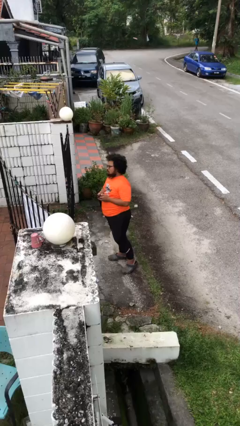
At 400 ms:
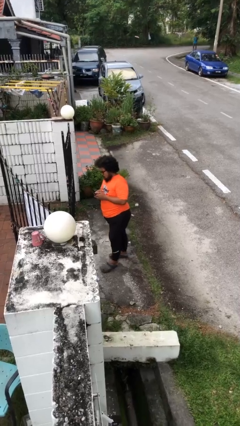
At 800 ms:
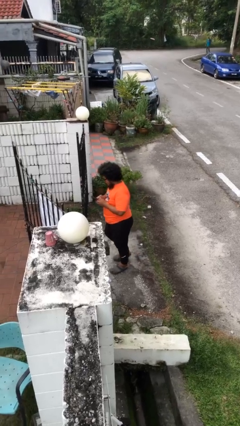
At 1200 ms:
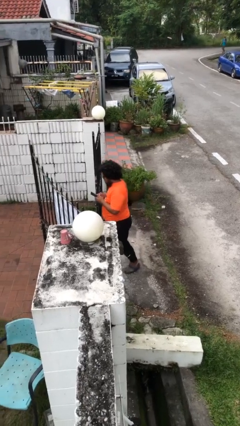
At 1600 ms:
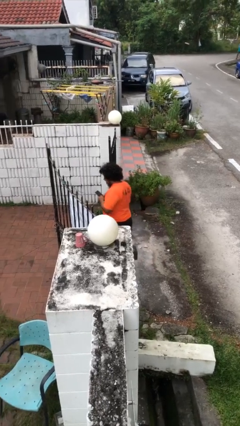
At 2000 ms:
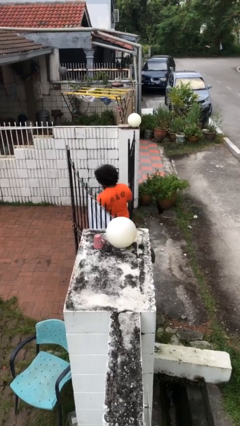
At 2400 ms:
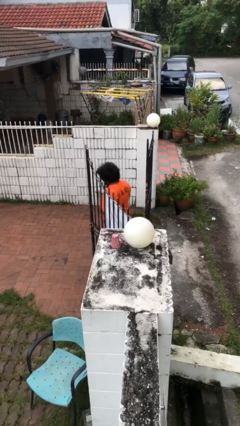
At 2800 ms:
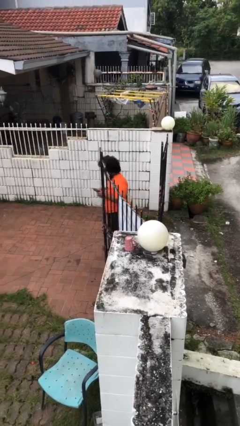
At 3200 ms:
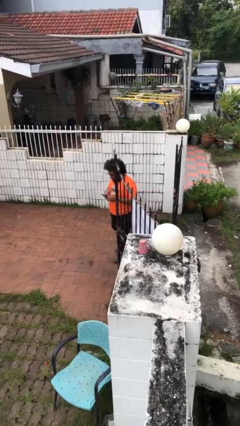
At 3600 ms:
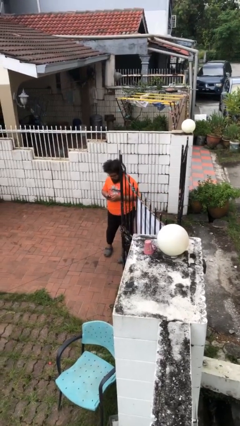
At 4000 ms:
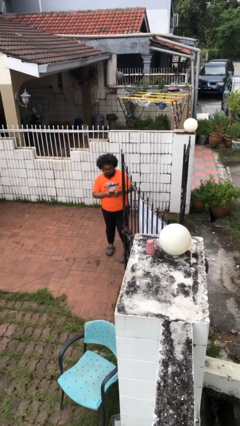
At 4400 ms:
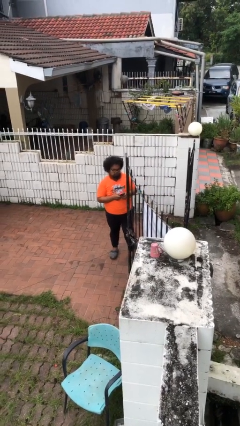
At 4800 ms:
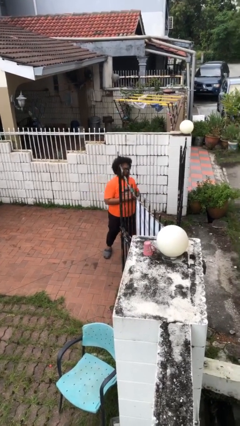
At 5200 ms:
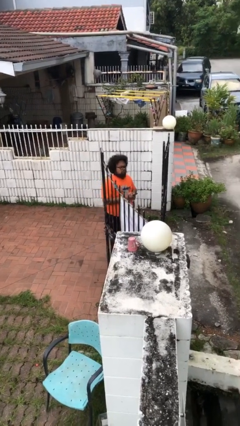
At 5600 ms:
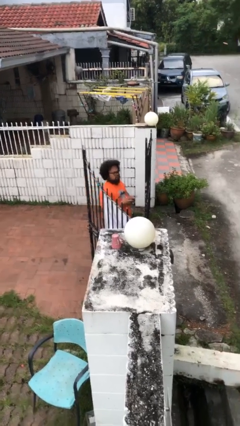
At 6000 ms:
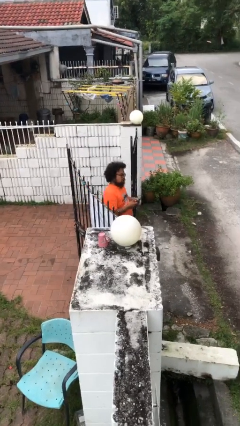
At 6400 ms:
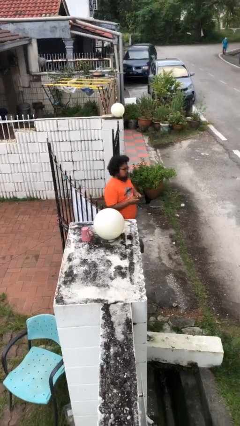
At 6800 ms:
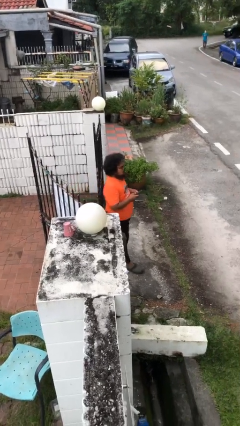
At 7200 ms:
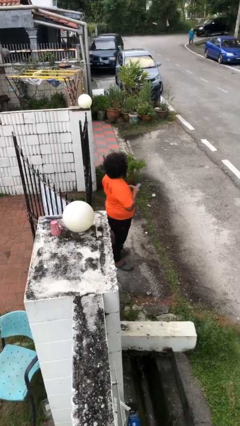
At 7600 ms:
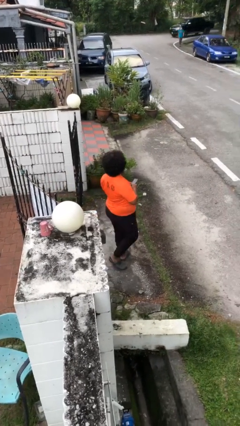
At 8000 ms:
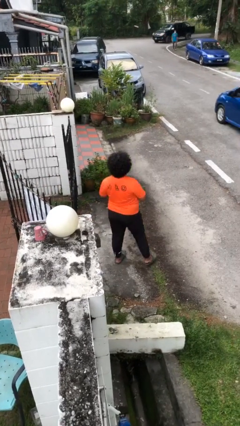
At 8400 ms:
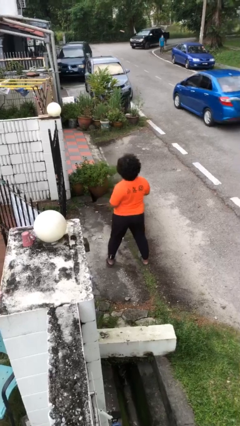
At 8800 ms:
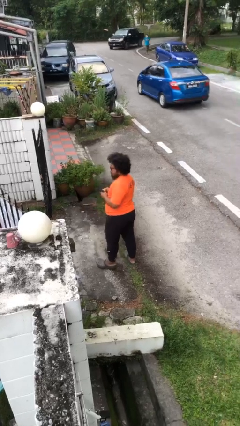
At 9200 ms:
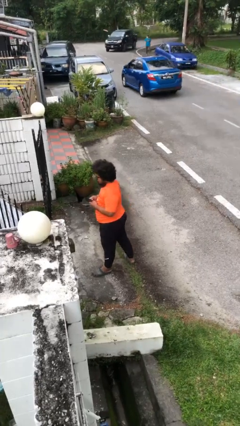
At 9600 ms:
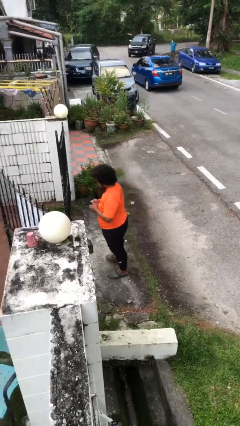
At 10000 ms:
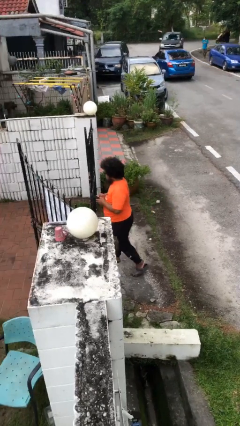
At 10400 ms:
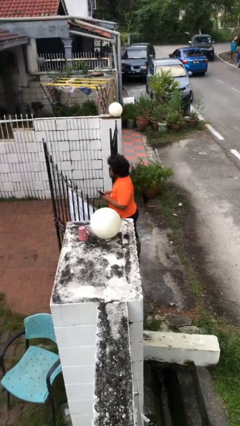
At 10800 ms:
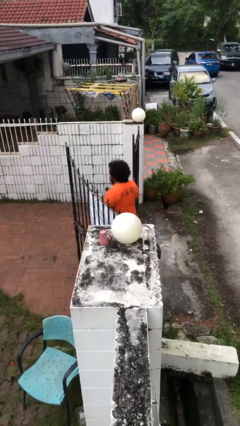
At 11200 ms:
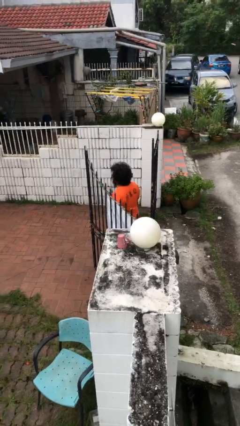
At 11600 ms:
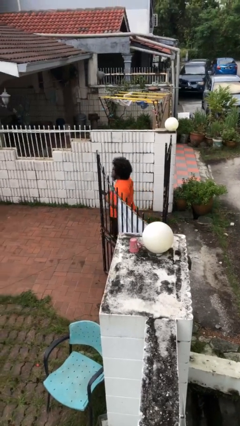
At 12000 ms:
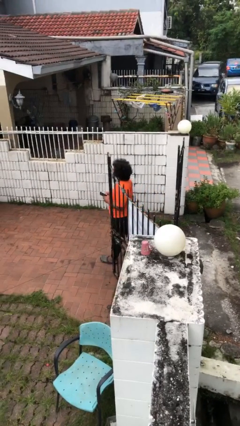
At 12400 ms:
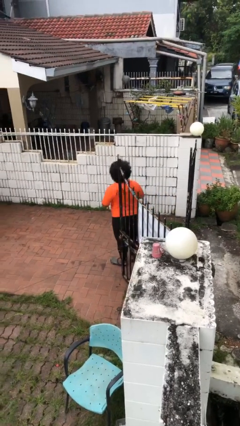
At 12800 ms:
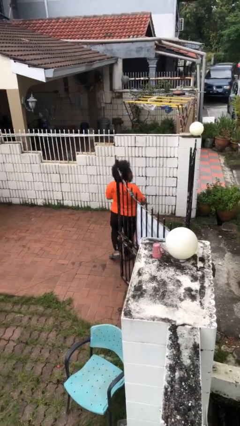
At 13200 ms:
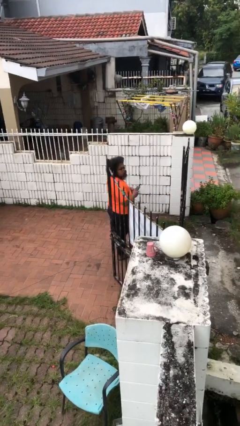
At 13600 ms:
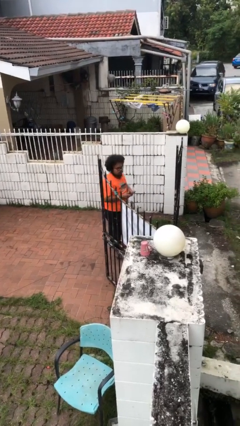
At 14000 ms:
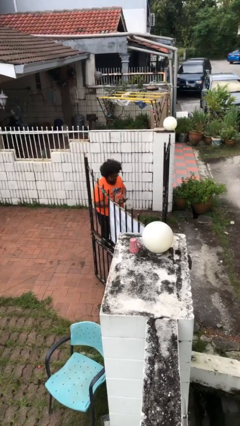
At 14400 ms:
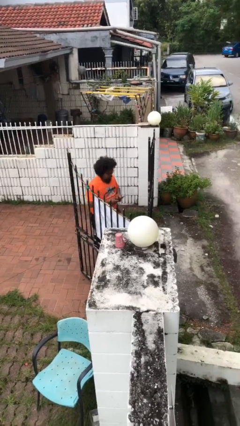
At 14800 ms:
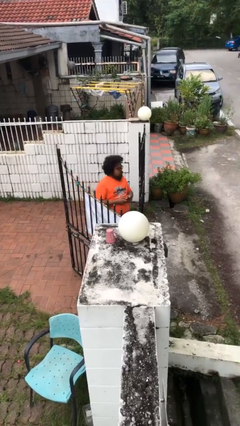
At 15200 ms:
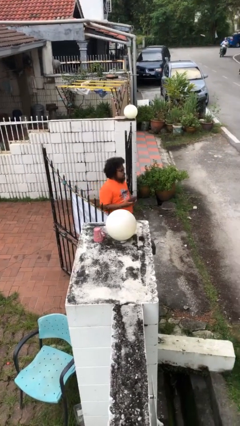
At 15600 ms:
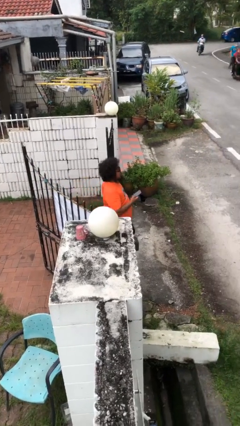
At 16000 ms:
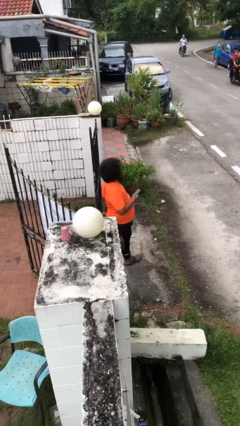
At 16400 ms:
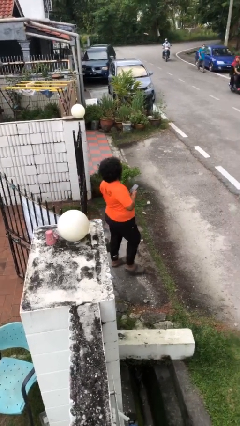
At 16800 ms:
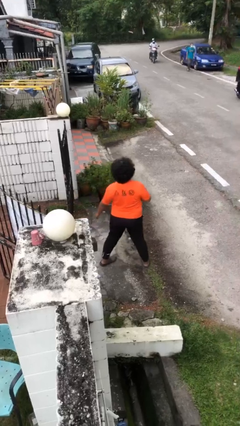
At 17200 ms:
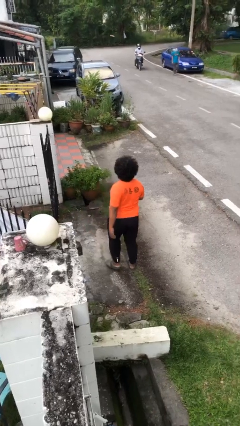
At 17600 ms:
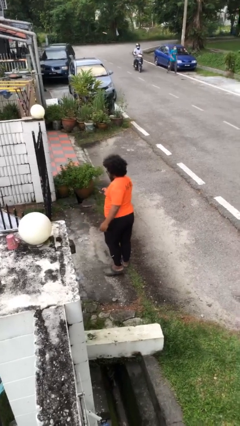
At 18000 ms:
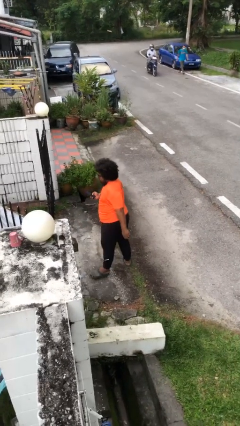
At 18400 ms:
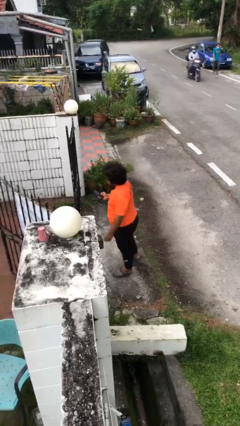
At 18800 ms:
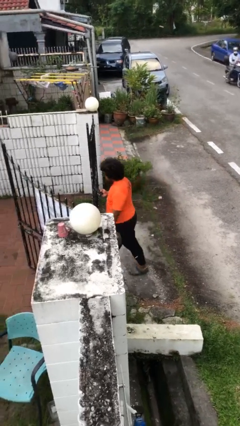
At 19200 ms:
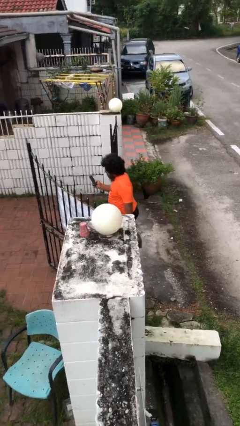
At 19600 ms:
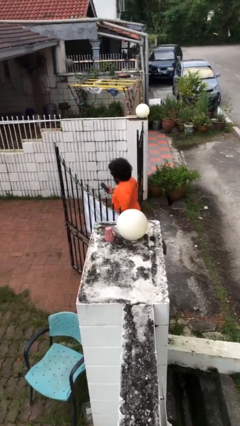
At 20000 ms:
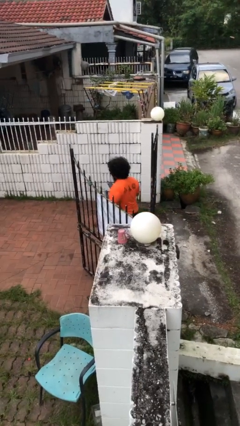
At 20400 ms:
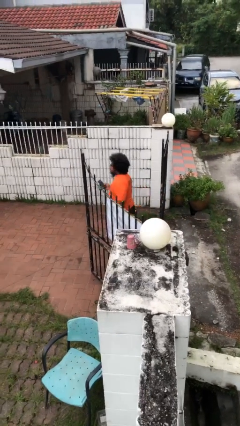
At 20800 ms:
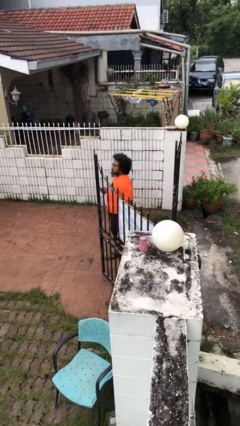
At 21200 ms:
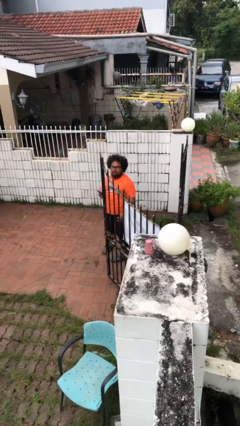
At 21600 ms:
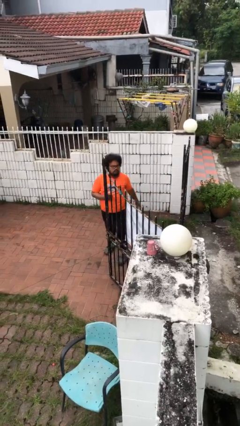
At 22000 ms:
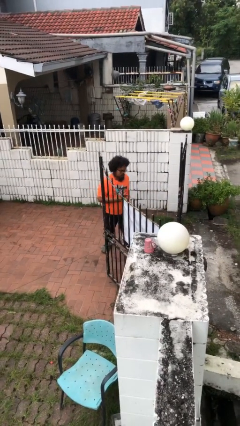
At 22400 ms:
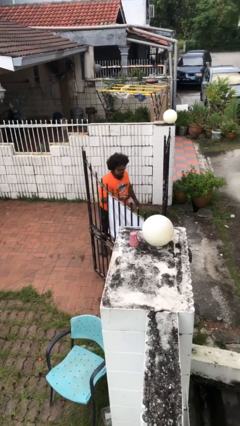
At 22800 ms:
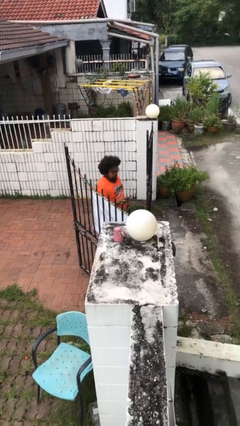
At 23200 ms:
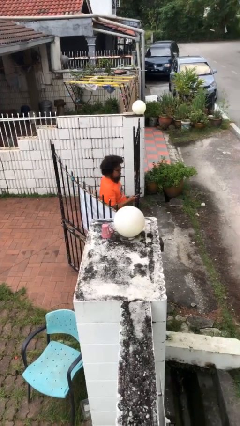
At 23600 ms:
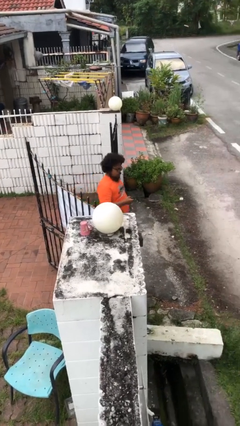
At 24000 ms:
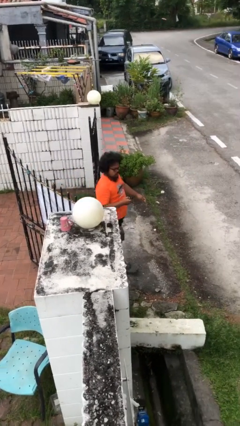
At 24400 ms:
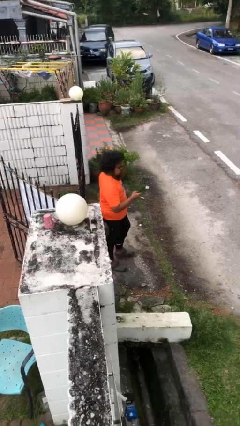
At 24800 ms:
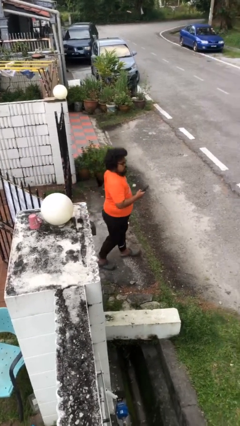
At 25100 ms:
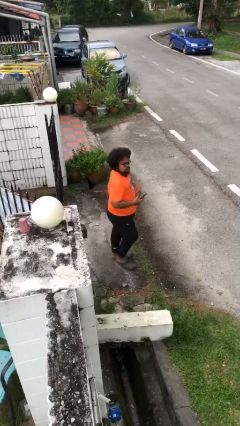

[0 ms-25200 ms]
person texts on phone

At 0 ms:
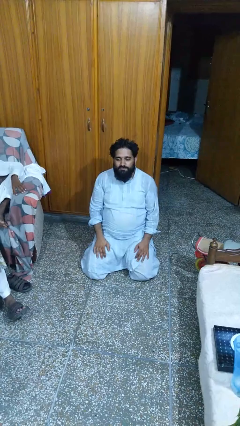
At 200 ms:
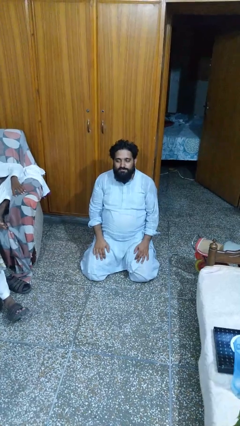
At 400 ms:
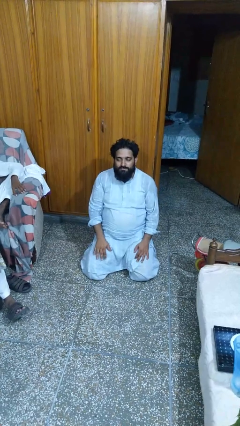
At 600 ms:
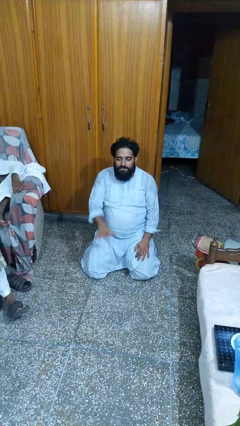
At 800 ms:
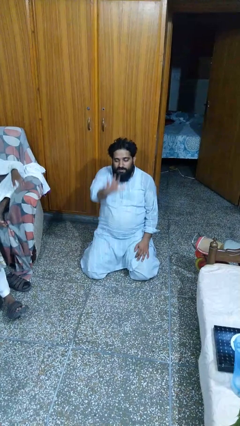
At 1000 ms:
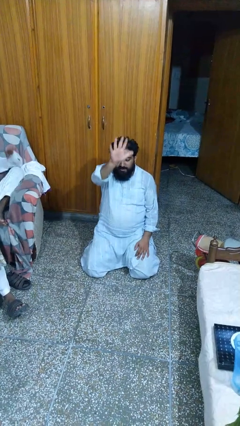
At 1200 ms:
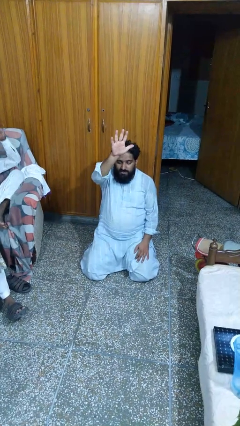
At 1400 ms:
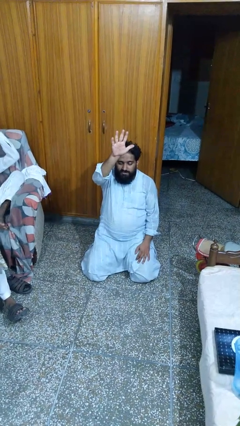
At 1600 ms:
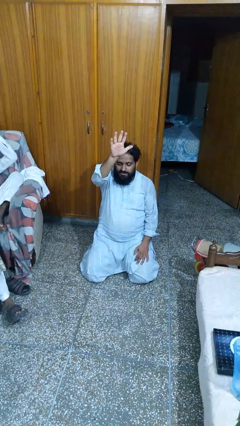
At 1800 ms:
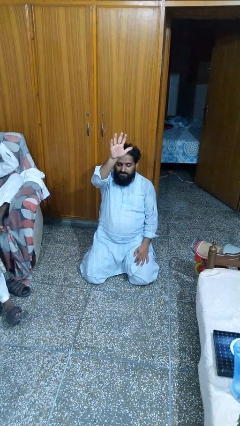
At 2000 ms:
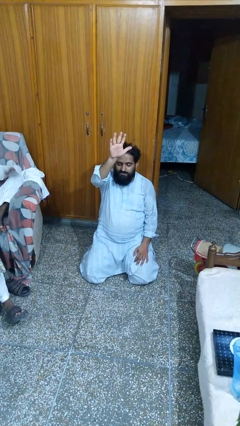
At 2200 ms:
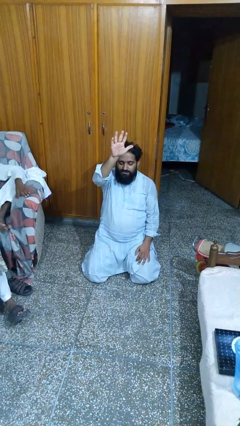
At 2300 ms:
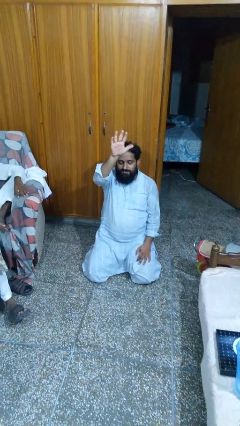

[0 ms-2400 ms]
person gestures raise hand

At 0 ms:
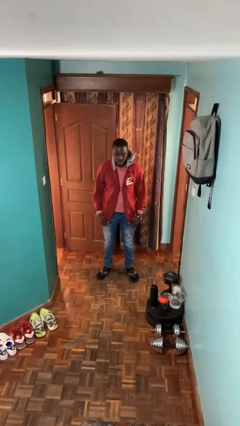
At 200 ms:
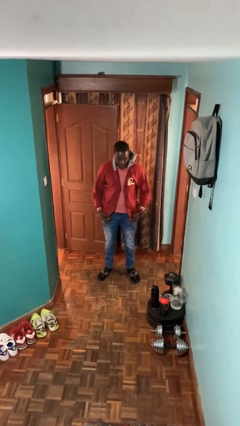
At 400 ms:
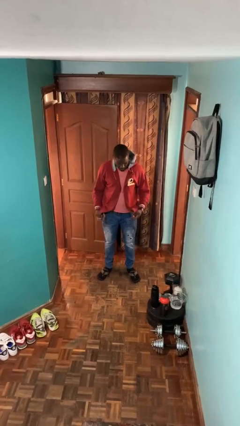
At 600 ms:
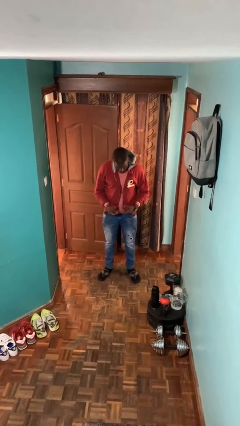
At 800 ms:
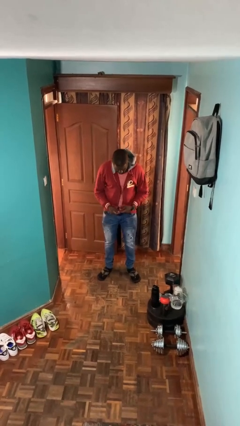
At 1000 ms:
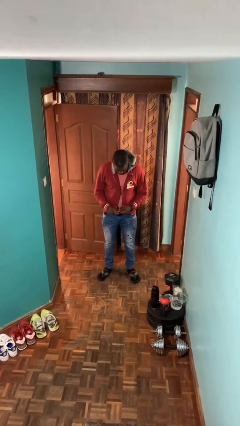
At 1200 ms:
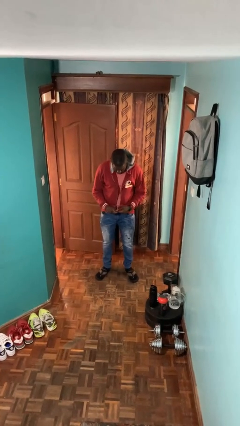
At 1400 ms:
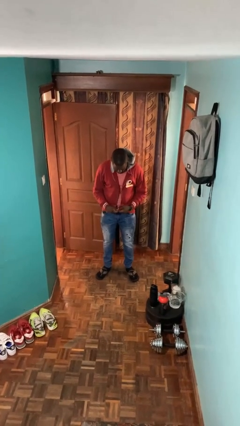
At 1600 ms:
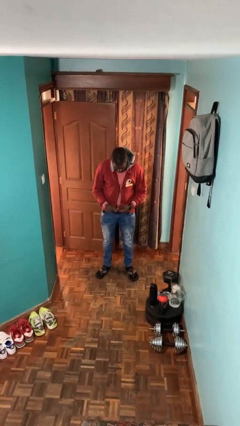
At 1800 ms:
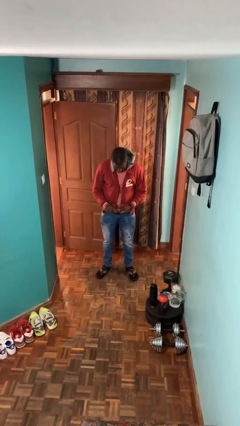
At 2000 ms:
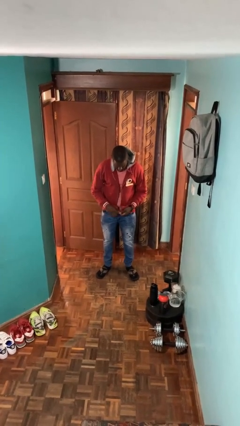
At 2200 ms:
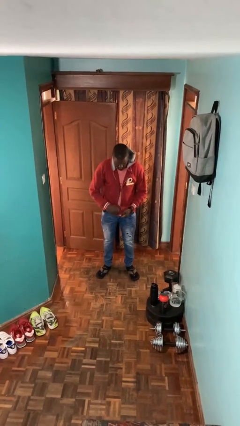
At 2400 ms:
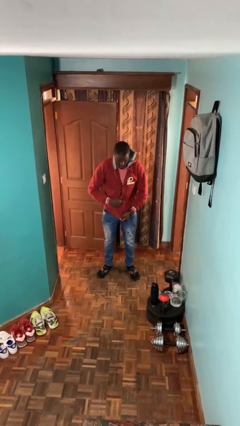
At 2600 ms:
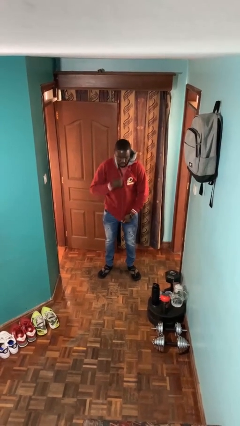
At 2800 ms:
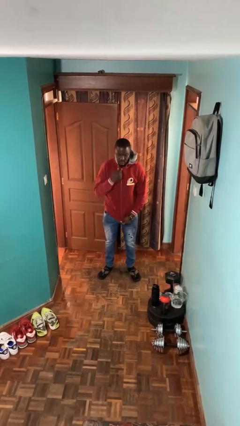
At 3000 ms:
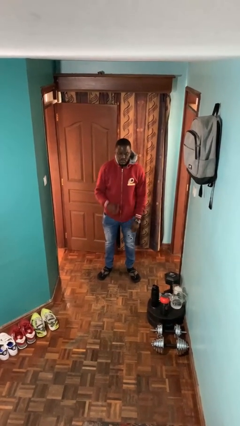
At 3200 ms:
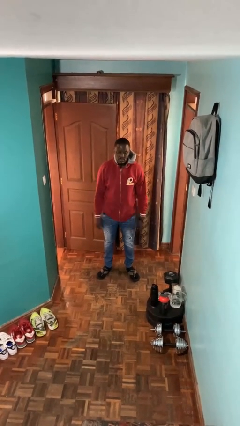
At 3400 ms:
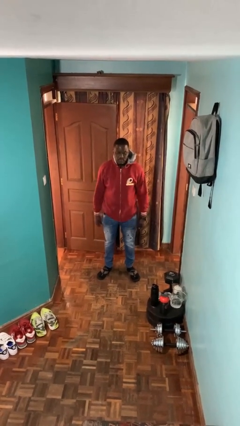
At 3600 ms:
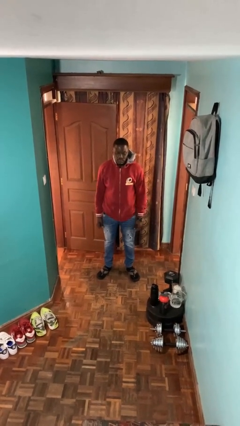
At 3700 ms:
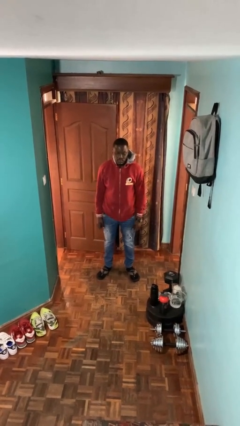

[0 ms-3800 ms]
person zips up jacket
